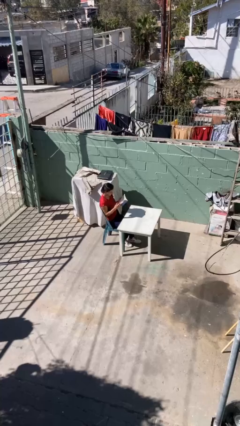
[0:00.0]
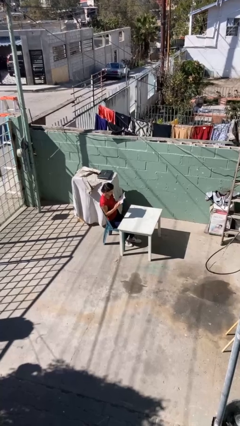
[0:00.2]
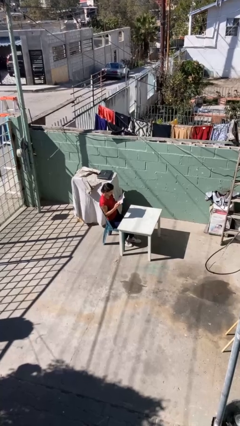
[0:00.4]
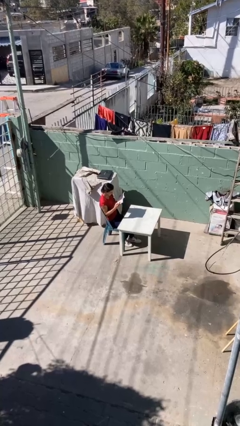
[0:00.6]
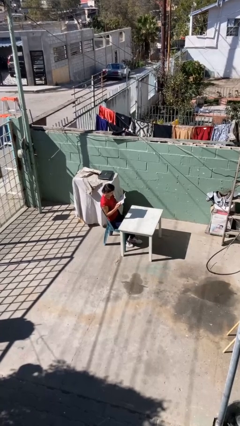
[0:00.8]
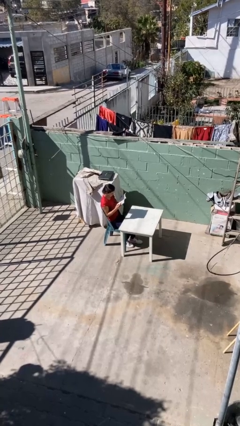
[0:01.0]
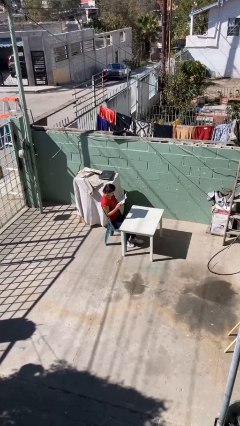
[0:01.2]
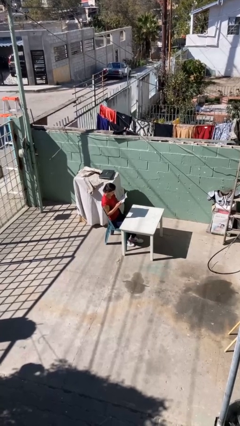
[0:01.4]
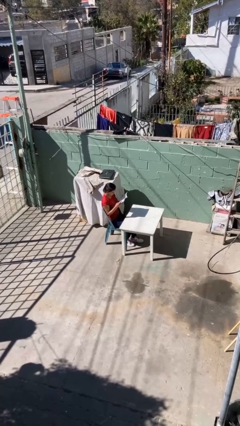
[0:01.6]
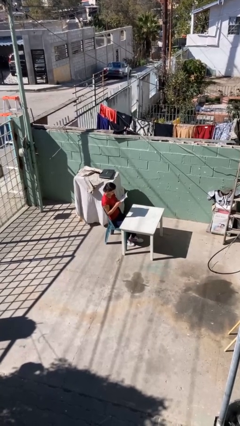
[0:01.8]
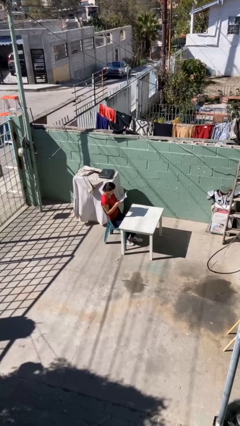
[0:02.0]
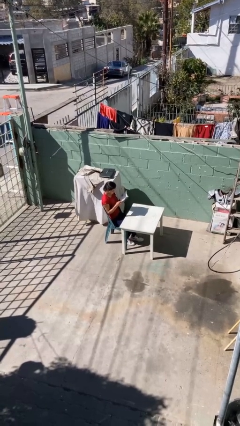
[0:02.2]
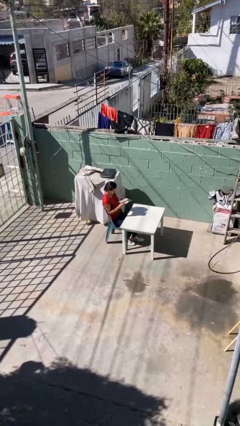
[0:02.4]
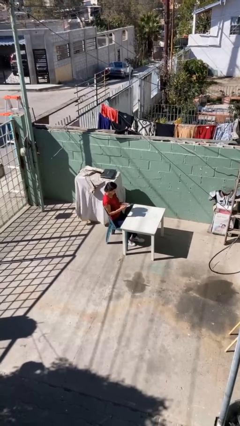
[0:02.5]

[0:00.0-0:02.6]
person reads document

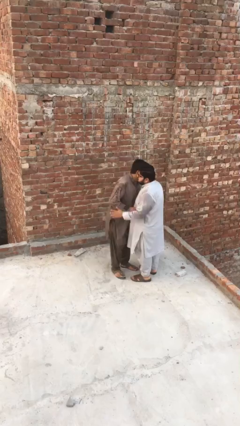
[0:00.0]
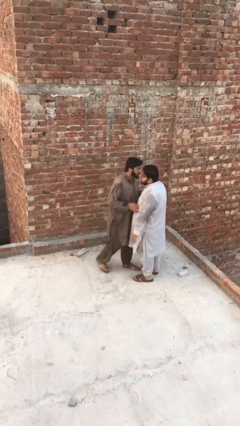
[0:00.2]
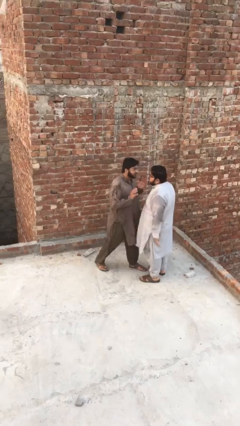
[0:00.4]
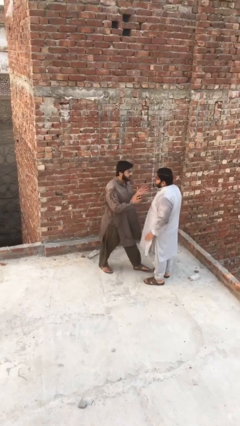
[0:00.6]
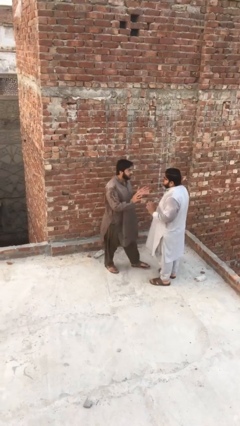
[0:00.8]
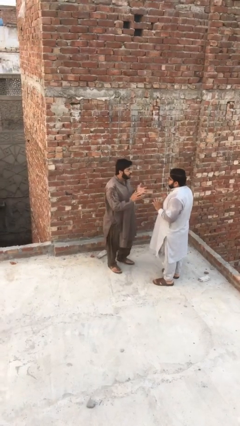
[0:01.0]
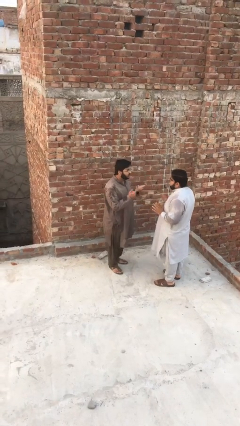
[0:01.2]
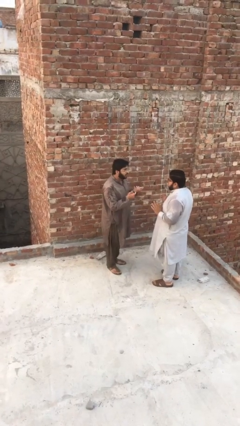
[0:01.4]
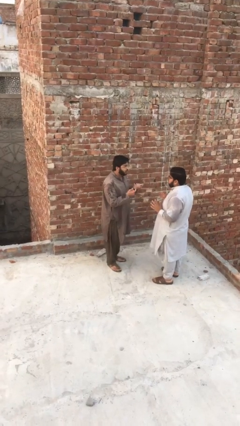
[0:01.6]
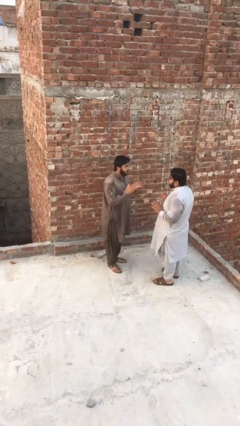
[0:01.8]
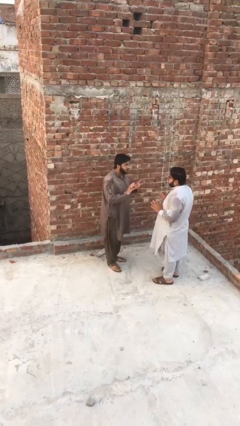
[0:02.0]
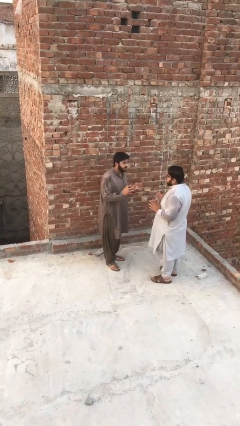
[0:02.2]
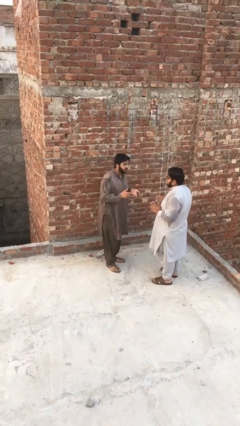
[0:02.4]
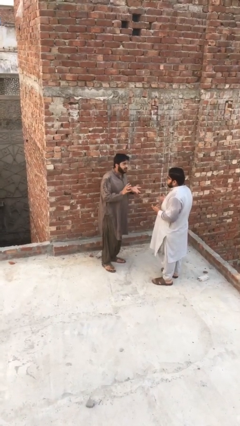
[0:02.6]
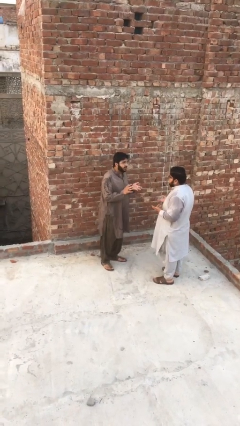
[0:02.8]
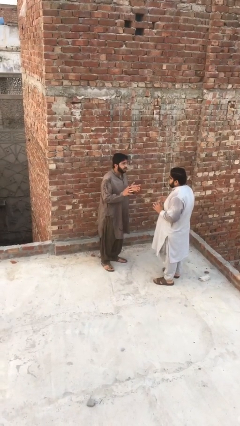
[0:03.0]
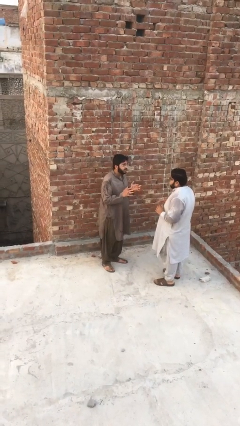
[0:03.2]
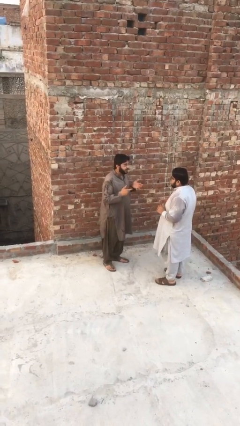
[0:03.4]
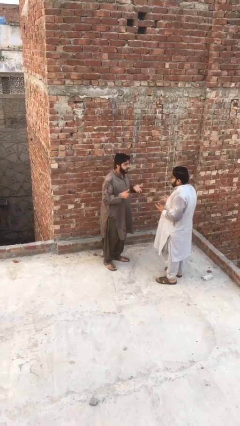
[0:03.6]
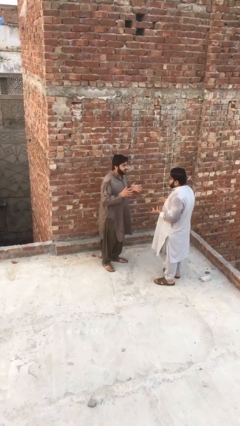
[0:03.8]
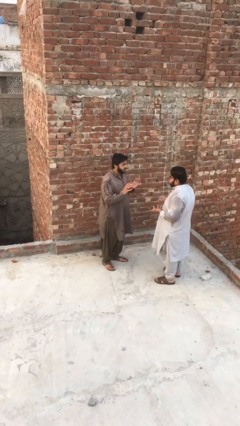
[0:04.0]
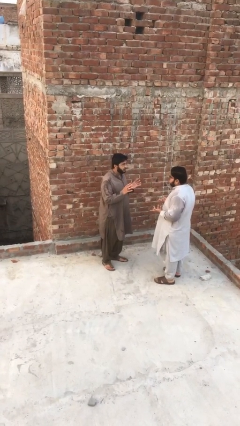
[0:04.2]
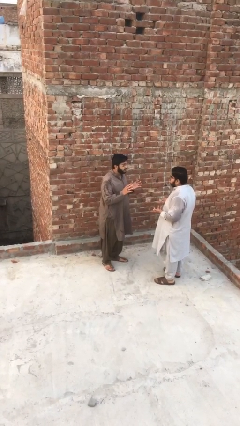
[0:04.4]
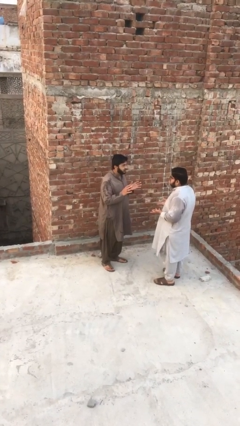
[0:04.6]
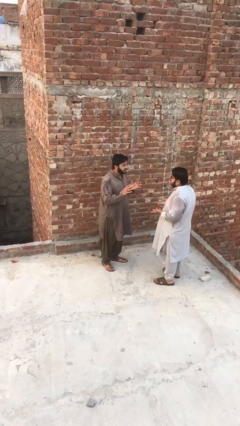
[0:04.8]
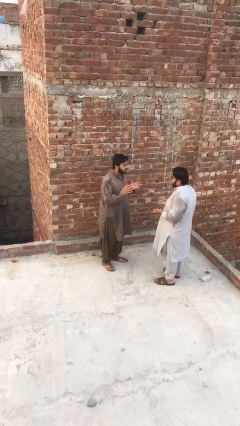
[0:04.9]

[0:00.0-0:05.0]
person talks to person

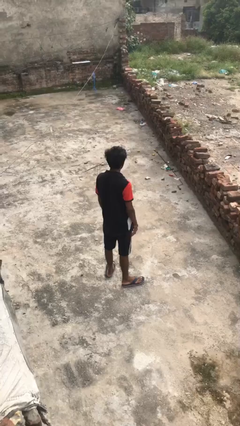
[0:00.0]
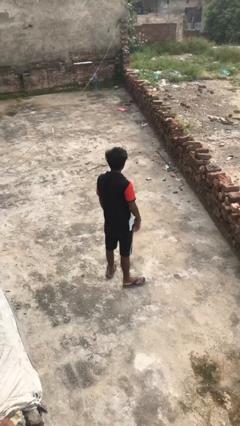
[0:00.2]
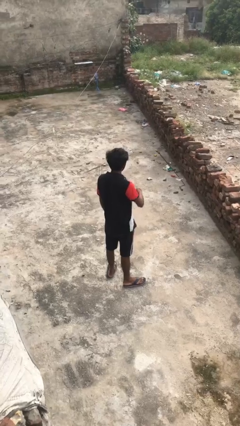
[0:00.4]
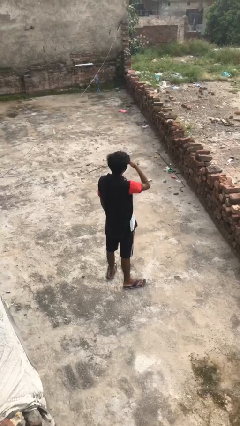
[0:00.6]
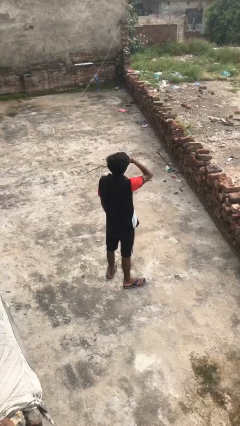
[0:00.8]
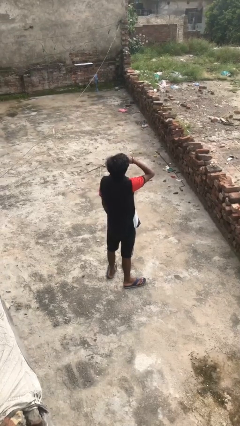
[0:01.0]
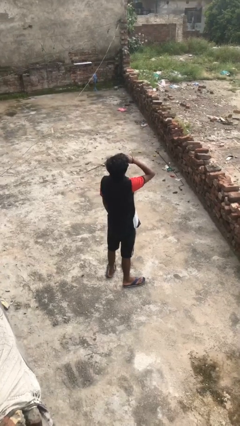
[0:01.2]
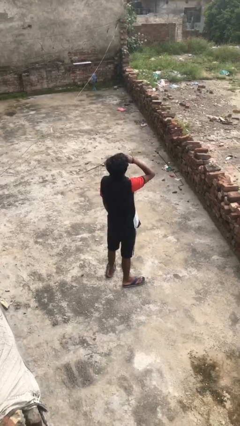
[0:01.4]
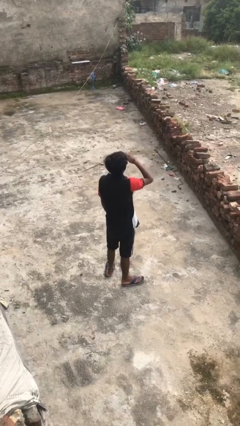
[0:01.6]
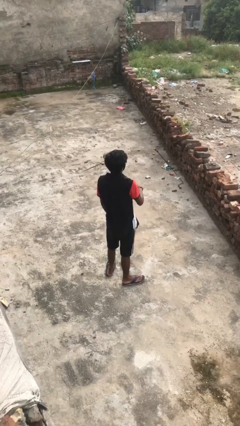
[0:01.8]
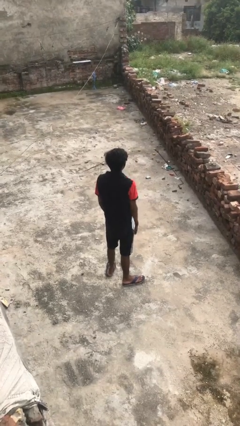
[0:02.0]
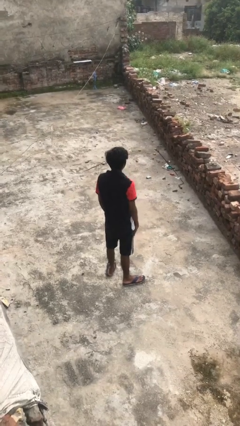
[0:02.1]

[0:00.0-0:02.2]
person shades eyes

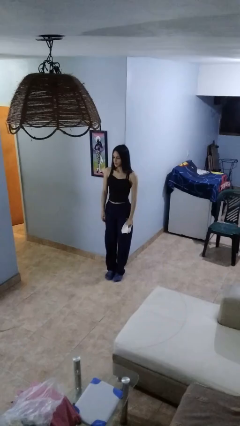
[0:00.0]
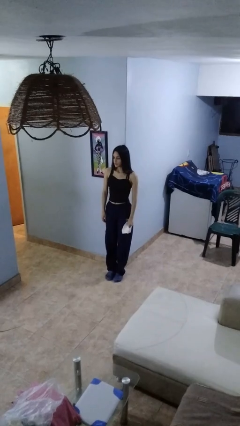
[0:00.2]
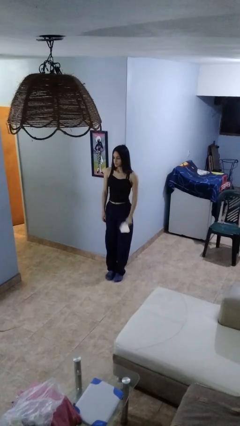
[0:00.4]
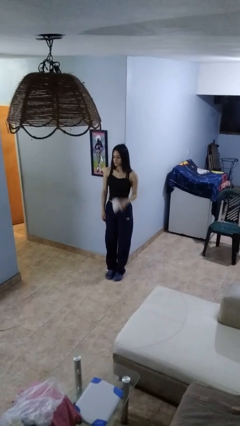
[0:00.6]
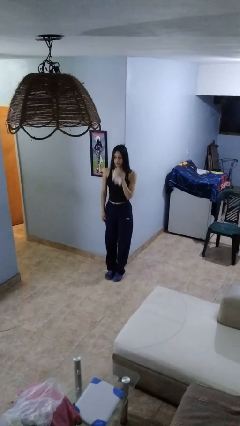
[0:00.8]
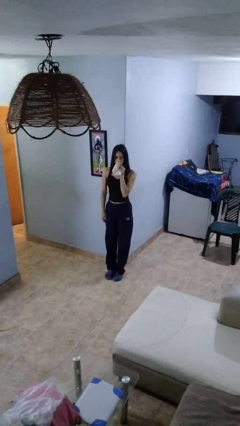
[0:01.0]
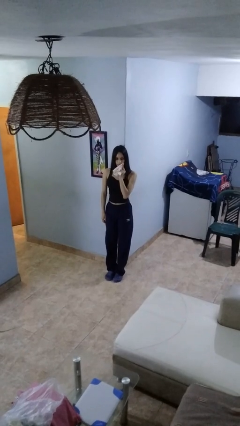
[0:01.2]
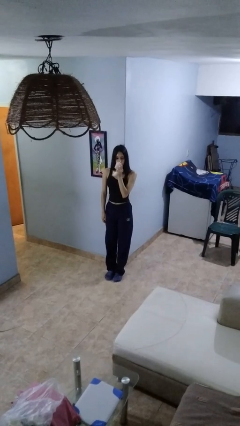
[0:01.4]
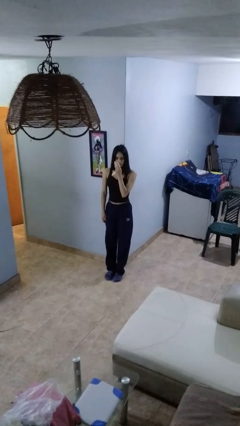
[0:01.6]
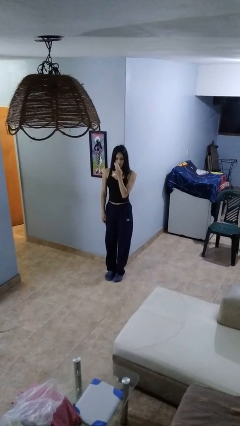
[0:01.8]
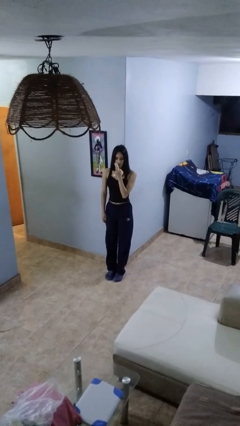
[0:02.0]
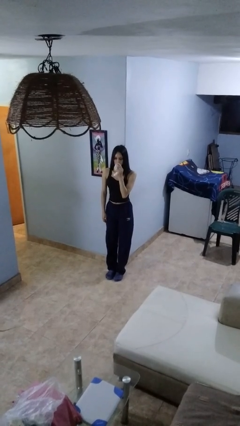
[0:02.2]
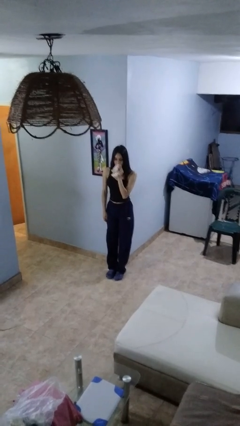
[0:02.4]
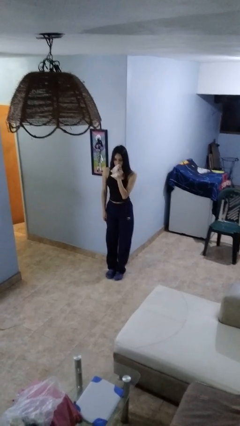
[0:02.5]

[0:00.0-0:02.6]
person wipes mouth with napkin

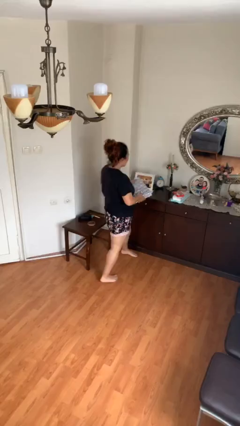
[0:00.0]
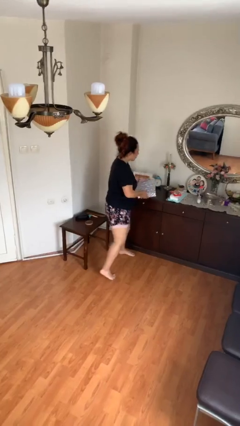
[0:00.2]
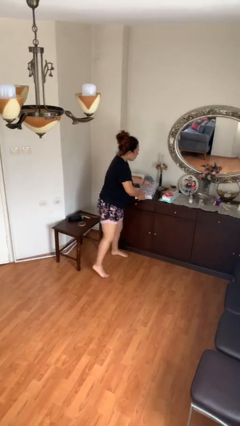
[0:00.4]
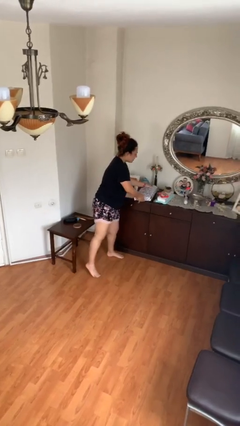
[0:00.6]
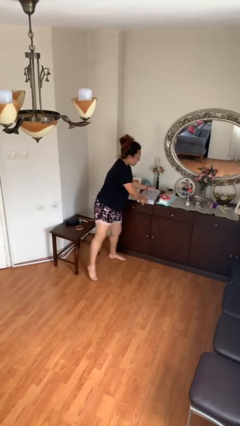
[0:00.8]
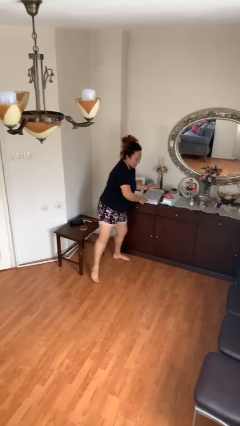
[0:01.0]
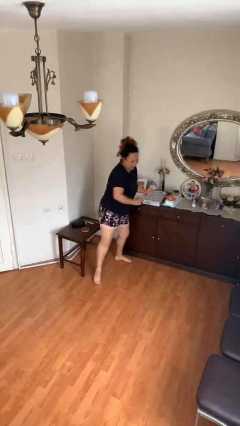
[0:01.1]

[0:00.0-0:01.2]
person puts down object on table

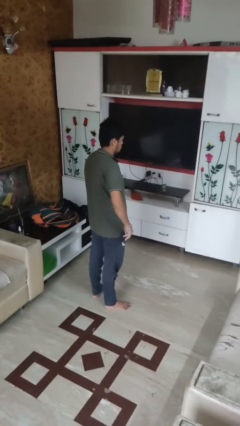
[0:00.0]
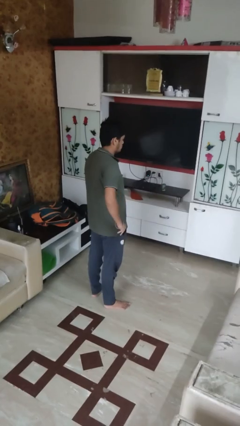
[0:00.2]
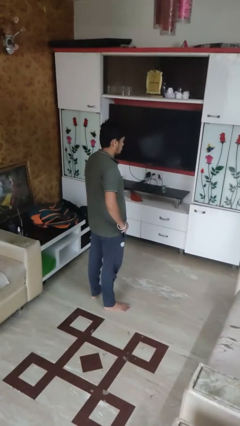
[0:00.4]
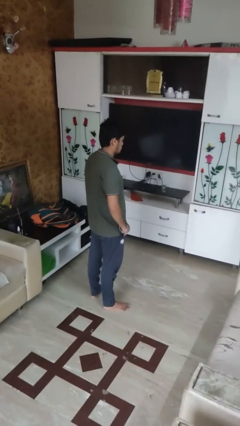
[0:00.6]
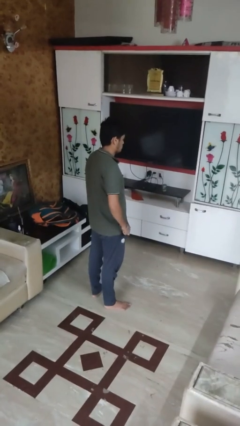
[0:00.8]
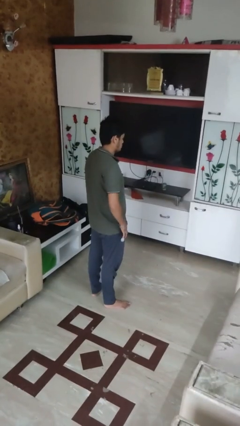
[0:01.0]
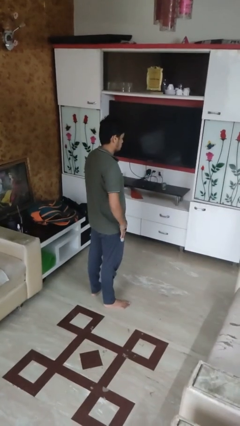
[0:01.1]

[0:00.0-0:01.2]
person puts phone into pocket

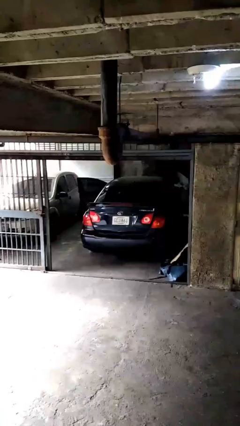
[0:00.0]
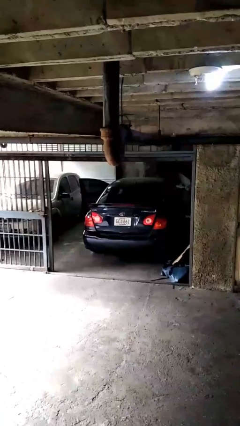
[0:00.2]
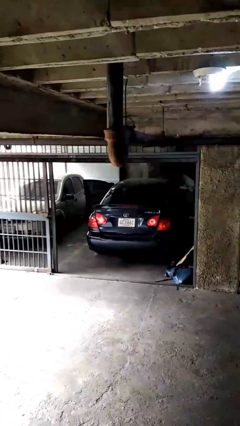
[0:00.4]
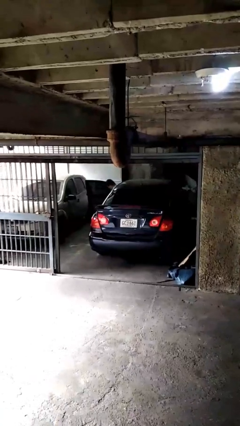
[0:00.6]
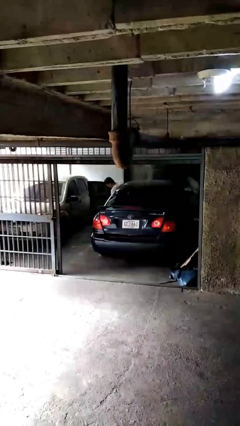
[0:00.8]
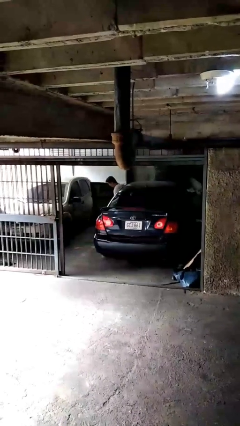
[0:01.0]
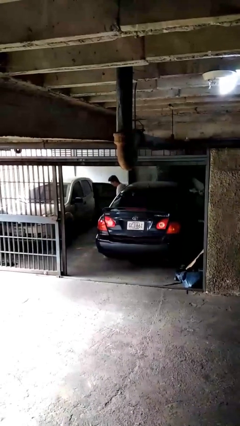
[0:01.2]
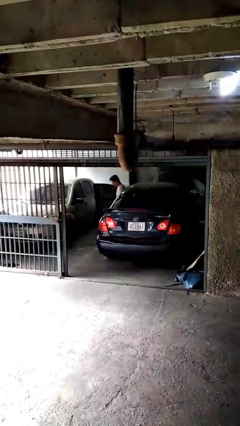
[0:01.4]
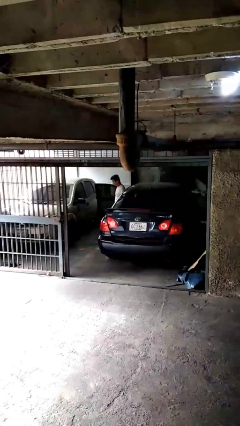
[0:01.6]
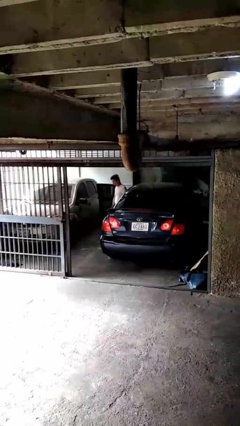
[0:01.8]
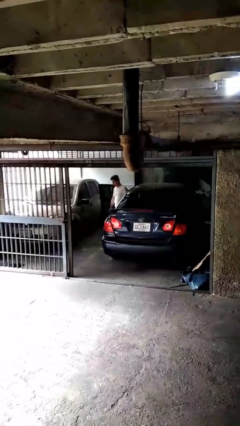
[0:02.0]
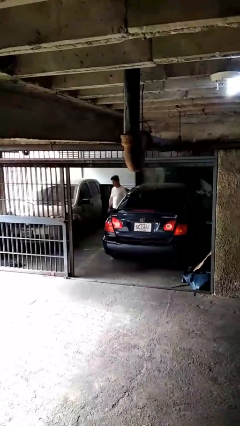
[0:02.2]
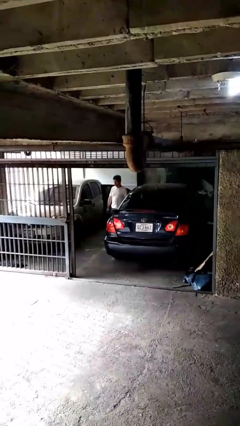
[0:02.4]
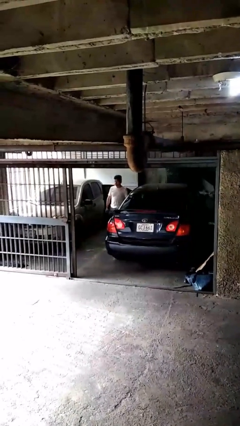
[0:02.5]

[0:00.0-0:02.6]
person exits car
